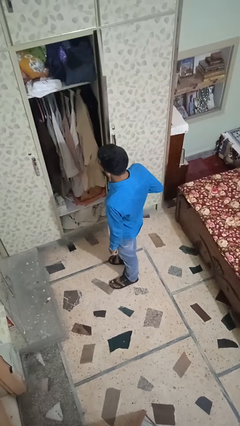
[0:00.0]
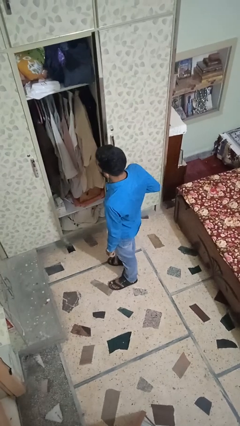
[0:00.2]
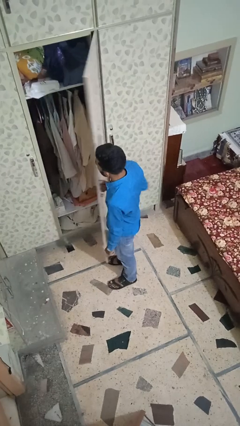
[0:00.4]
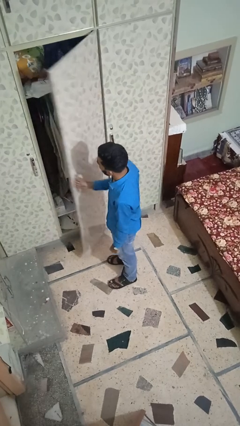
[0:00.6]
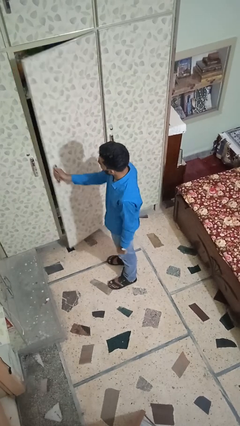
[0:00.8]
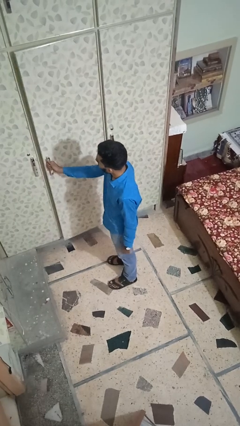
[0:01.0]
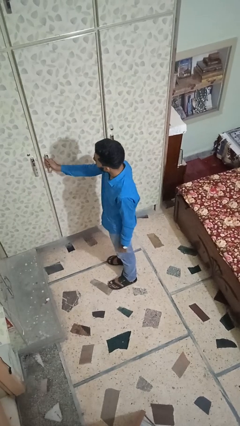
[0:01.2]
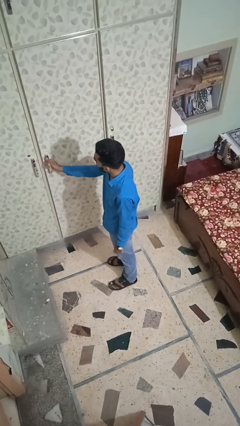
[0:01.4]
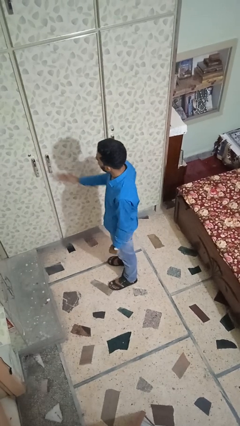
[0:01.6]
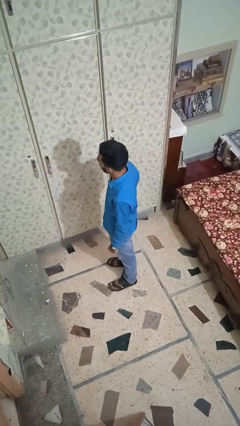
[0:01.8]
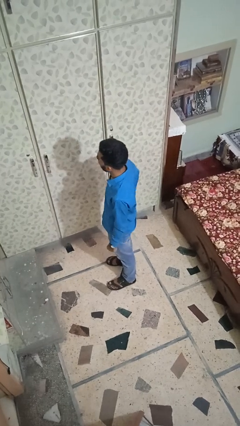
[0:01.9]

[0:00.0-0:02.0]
person closes closet door

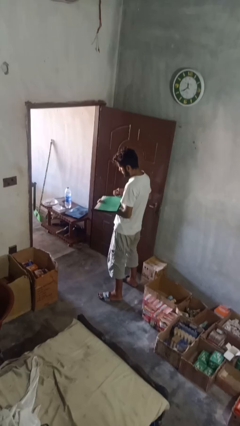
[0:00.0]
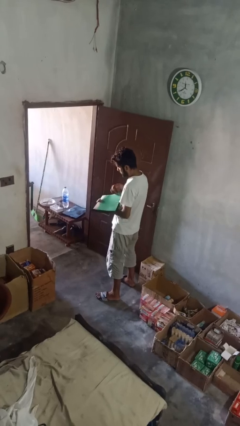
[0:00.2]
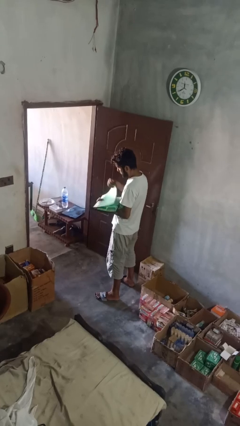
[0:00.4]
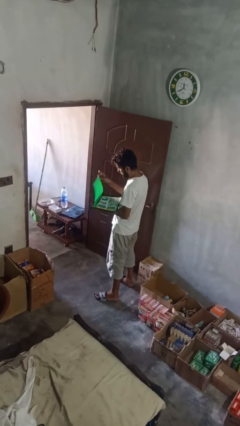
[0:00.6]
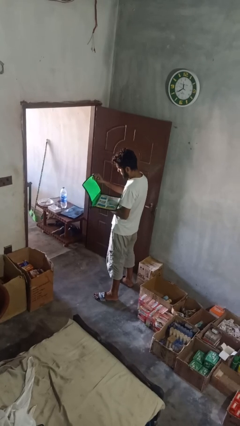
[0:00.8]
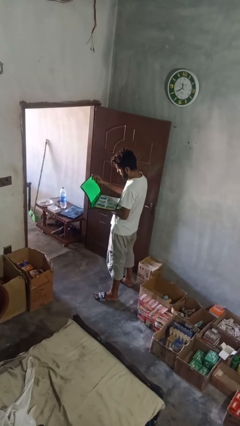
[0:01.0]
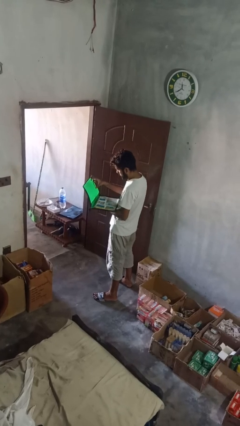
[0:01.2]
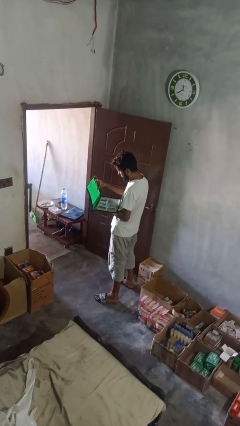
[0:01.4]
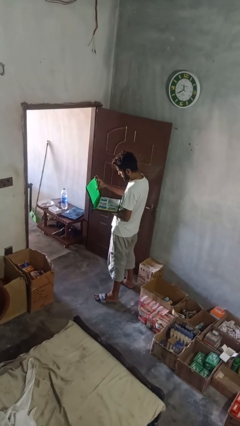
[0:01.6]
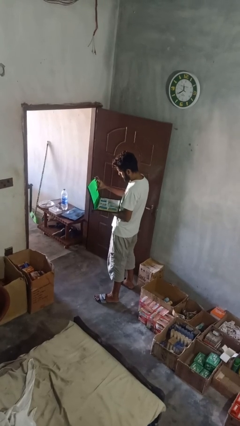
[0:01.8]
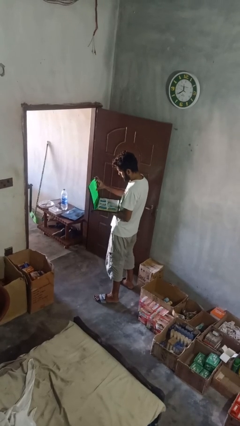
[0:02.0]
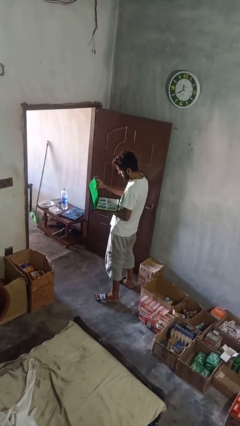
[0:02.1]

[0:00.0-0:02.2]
person opens laptop

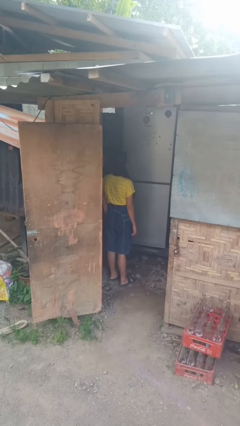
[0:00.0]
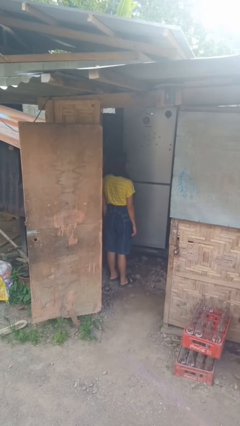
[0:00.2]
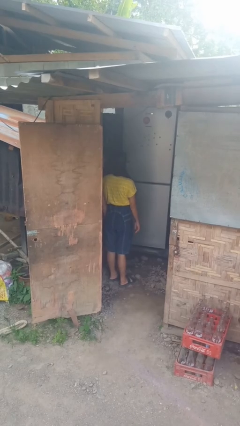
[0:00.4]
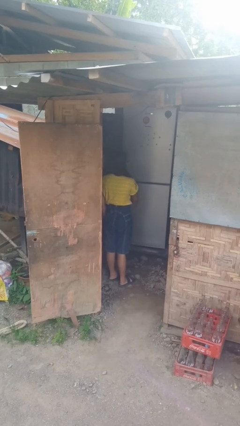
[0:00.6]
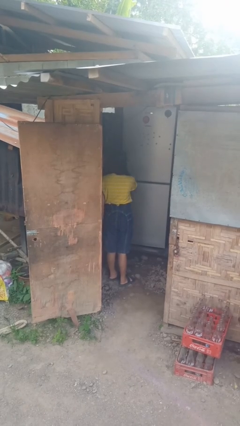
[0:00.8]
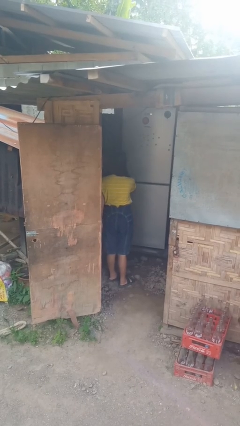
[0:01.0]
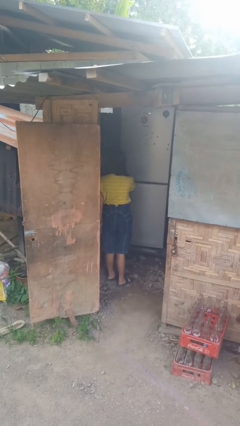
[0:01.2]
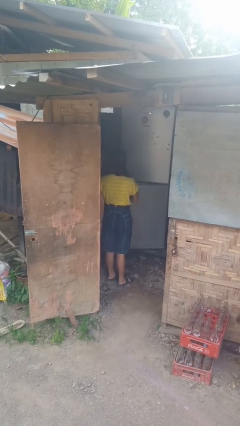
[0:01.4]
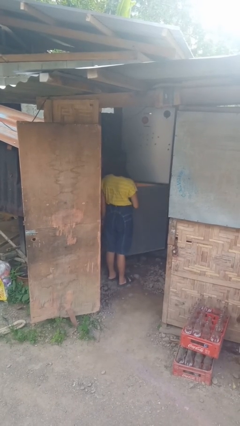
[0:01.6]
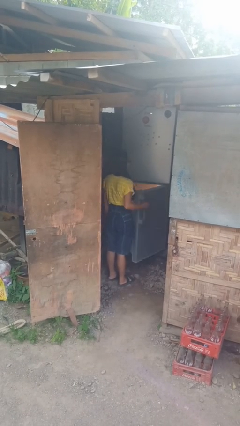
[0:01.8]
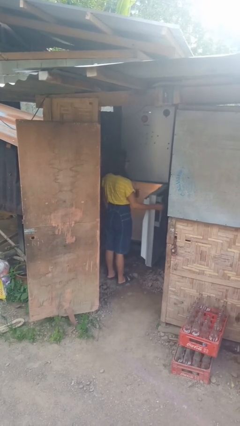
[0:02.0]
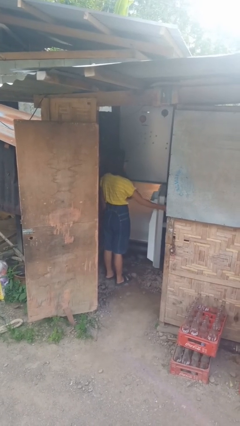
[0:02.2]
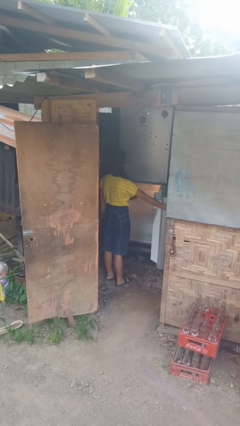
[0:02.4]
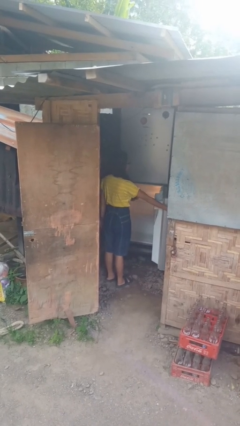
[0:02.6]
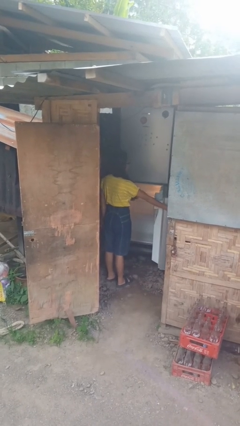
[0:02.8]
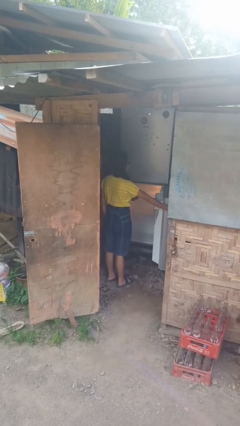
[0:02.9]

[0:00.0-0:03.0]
person opens refrigerator

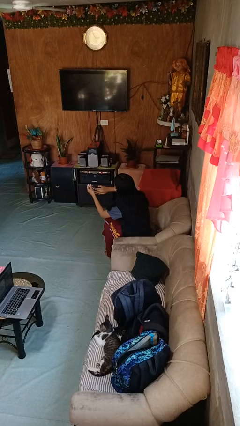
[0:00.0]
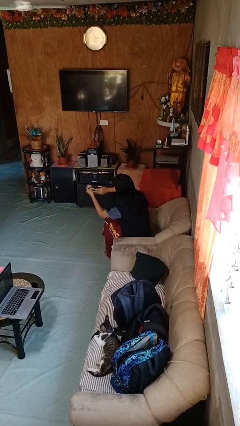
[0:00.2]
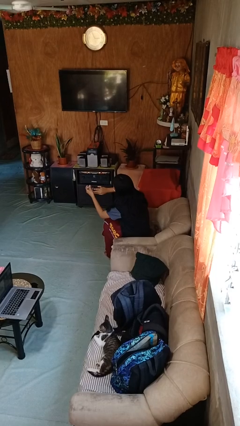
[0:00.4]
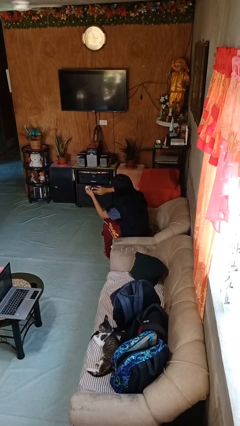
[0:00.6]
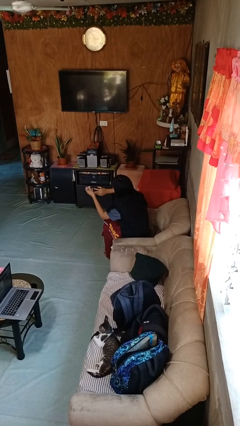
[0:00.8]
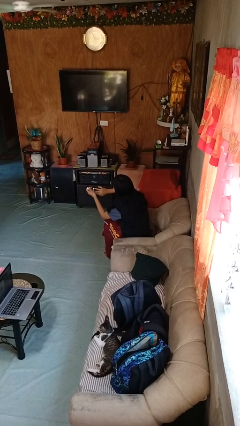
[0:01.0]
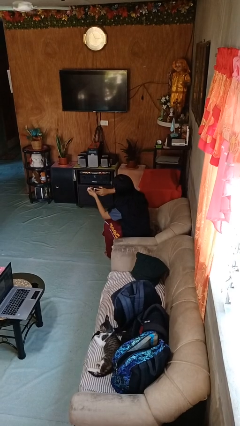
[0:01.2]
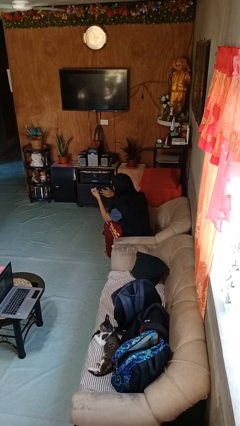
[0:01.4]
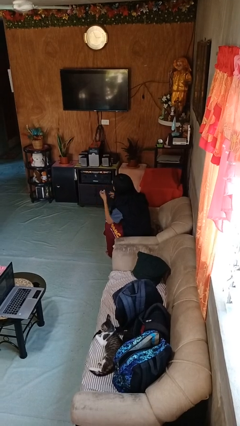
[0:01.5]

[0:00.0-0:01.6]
person clips fingernails

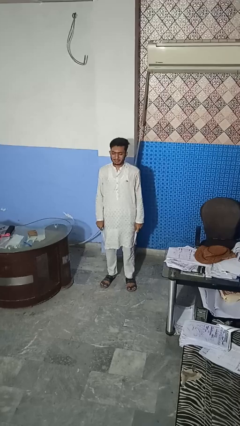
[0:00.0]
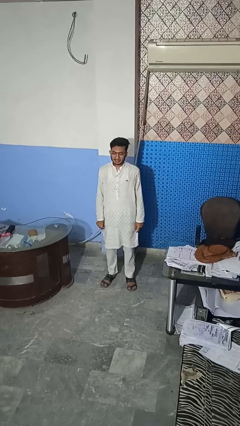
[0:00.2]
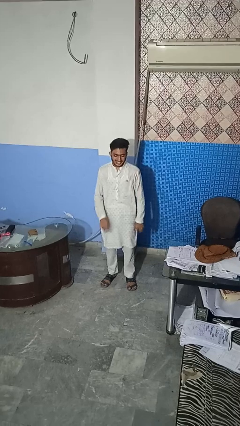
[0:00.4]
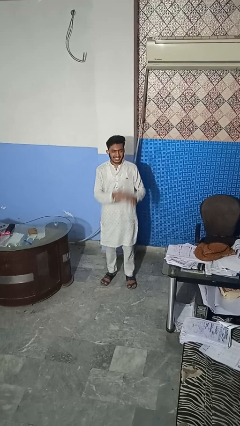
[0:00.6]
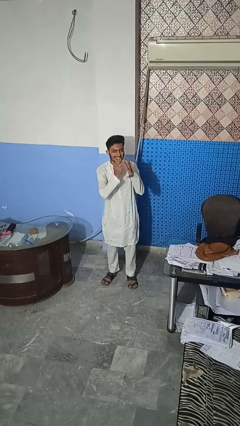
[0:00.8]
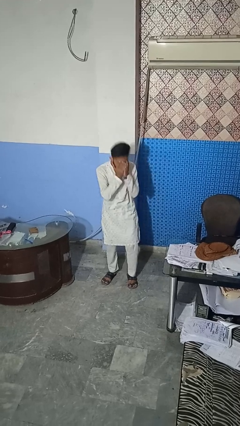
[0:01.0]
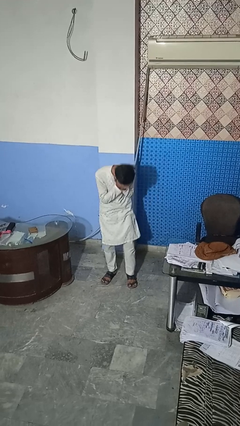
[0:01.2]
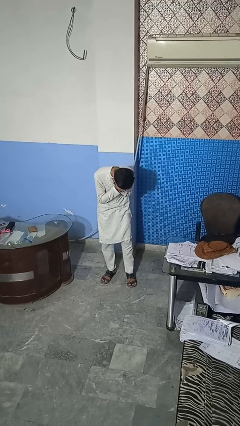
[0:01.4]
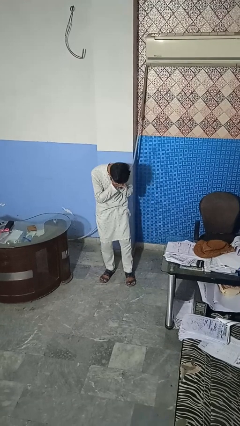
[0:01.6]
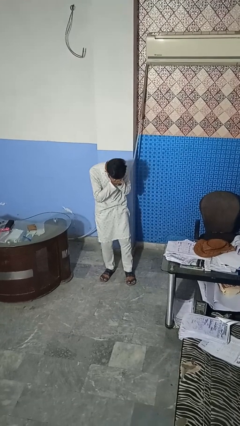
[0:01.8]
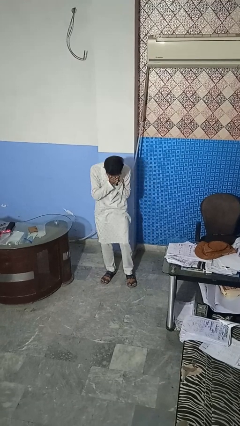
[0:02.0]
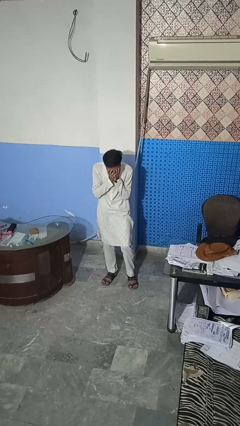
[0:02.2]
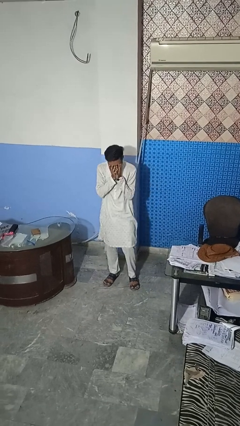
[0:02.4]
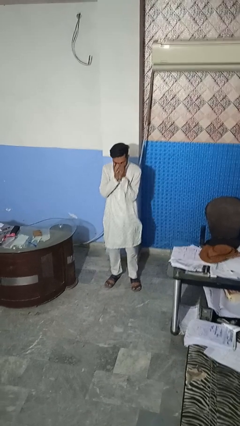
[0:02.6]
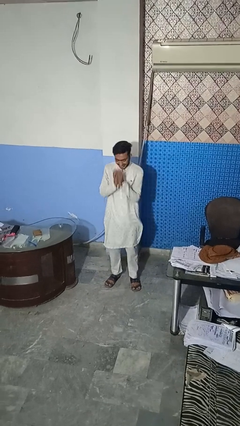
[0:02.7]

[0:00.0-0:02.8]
person sneezes into hand

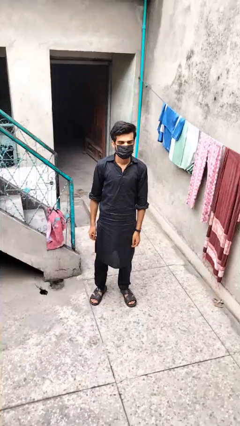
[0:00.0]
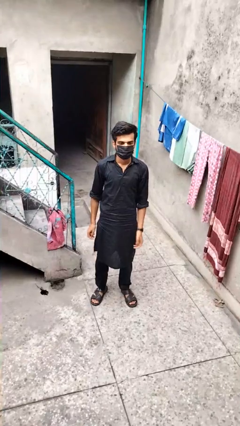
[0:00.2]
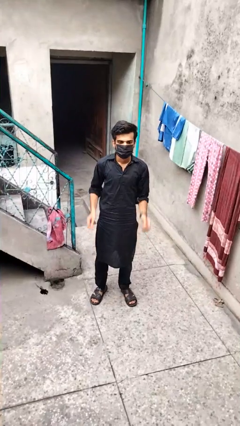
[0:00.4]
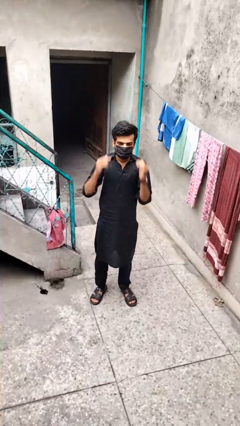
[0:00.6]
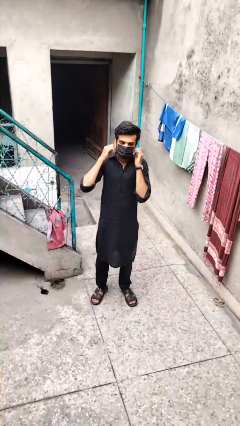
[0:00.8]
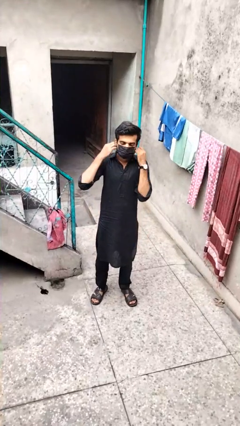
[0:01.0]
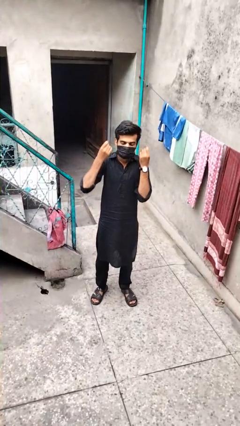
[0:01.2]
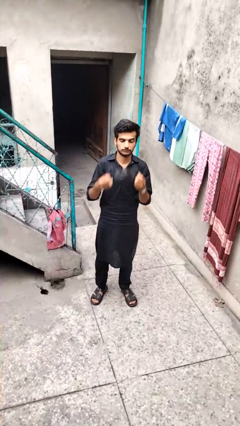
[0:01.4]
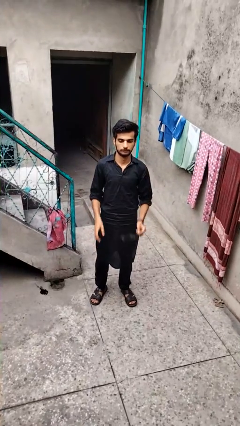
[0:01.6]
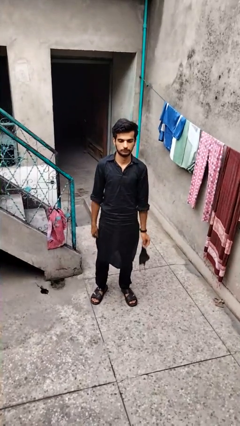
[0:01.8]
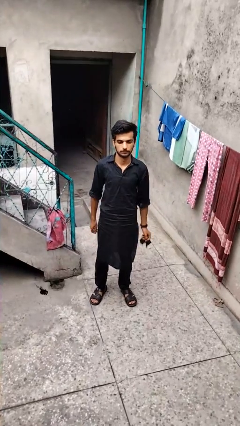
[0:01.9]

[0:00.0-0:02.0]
person takes off facemask

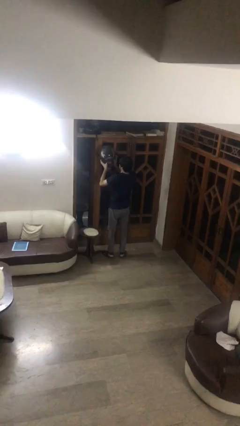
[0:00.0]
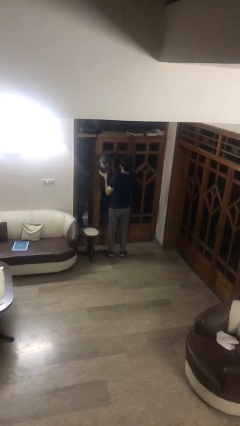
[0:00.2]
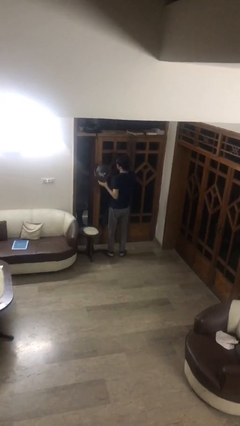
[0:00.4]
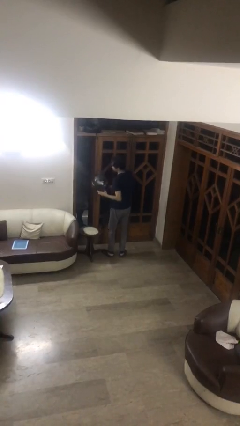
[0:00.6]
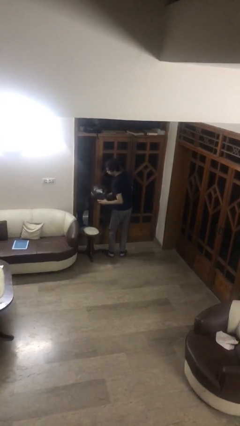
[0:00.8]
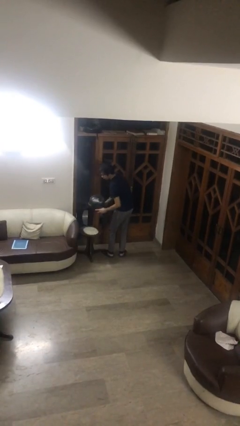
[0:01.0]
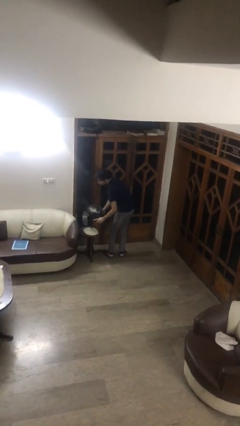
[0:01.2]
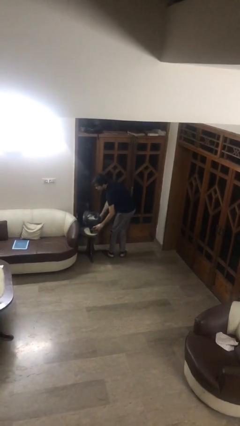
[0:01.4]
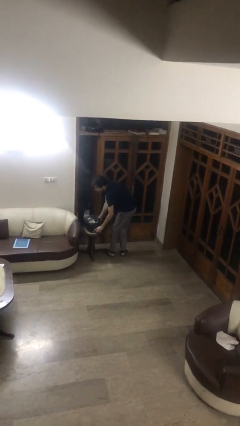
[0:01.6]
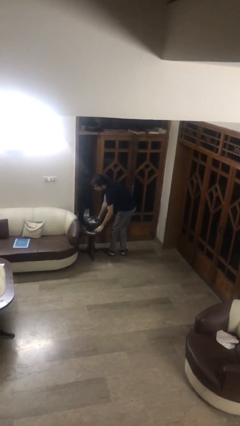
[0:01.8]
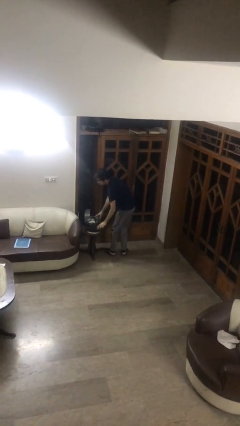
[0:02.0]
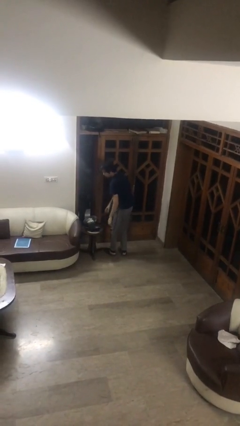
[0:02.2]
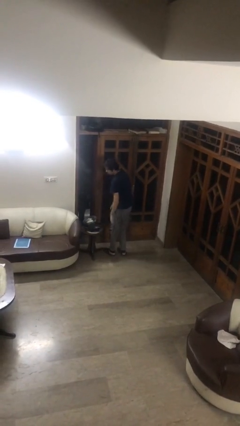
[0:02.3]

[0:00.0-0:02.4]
person puts down object on table

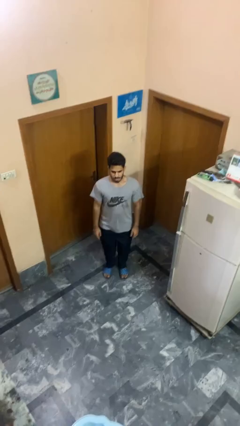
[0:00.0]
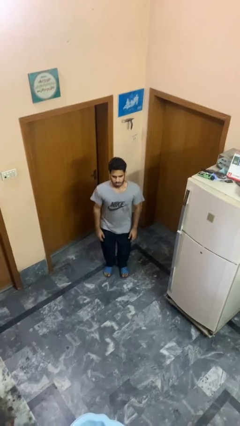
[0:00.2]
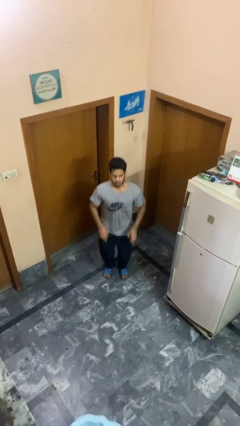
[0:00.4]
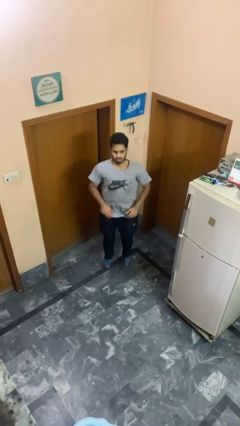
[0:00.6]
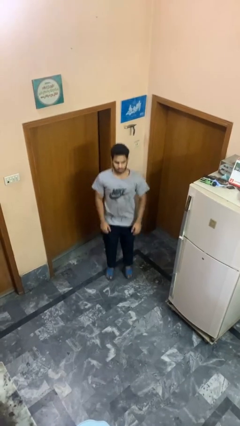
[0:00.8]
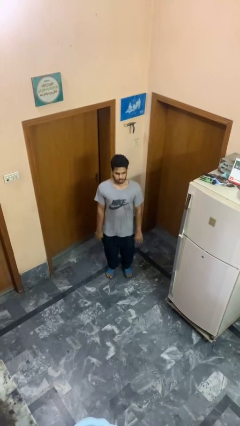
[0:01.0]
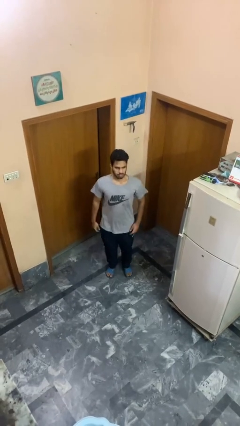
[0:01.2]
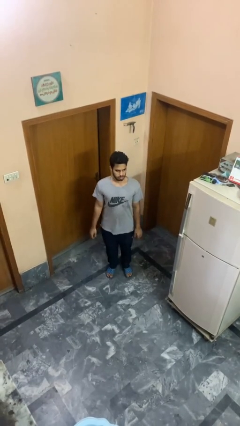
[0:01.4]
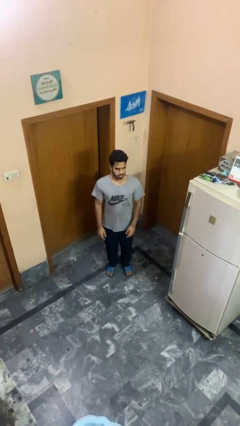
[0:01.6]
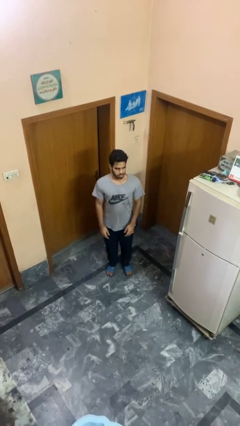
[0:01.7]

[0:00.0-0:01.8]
person jumps
